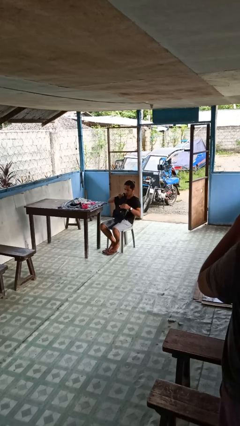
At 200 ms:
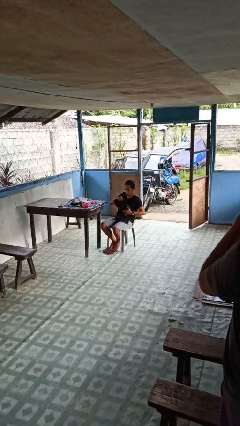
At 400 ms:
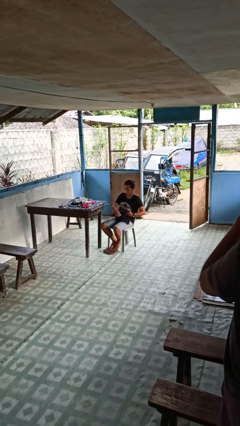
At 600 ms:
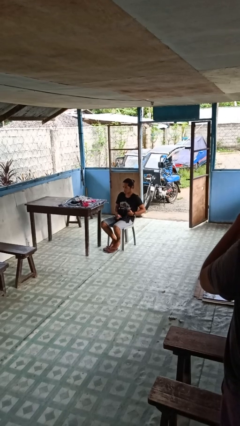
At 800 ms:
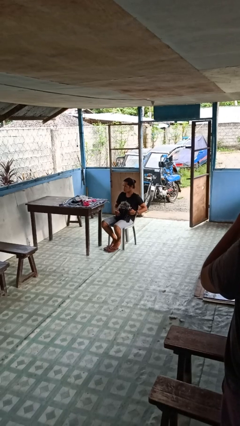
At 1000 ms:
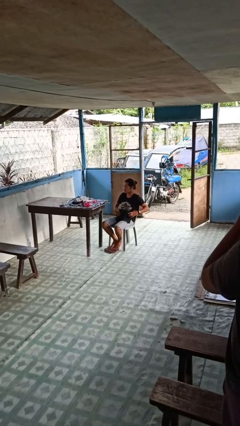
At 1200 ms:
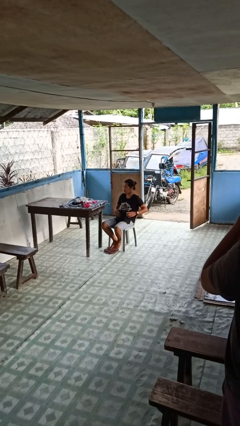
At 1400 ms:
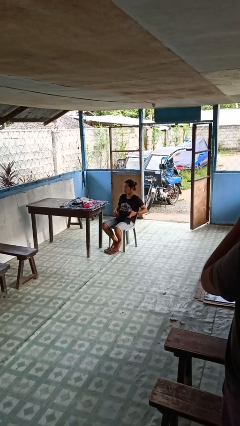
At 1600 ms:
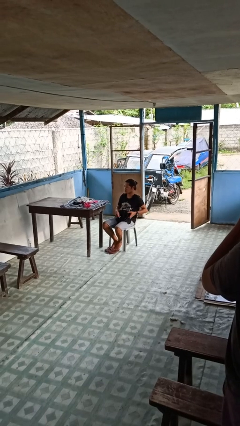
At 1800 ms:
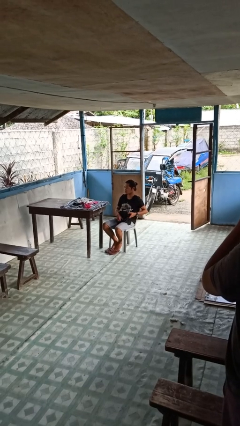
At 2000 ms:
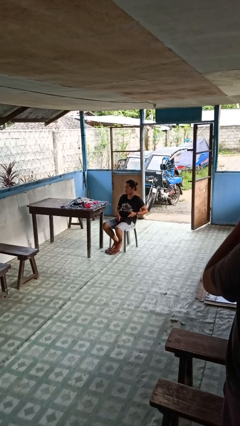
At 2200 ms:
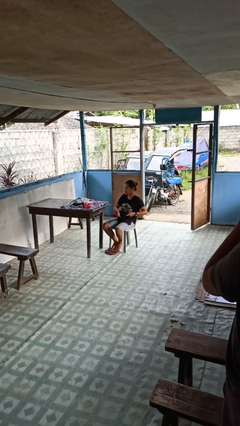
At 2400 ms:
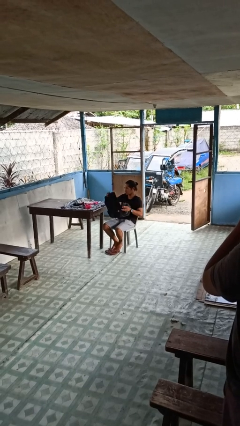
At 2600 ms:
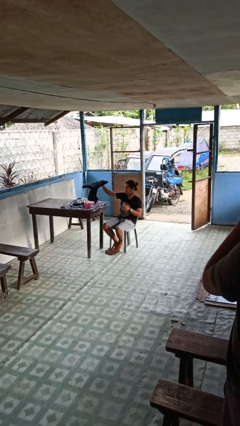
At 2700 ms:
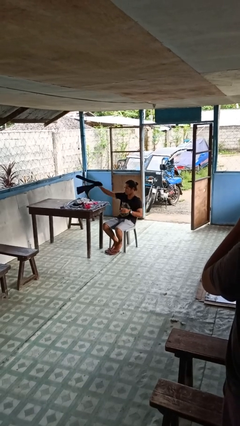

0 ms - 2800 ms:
person folds pants

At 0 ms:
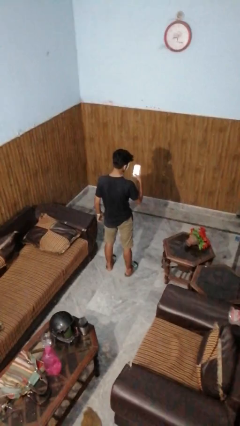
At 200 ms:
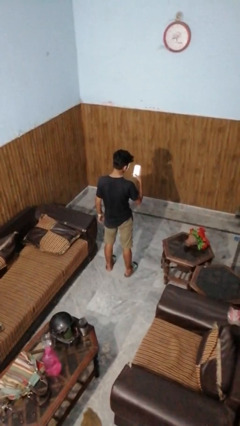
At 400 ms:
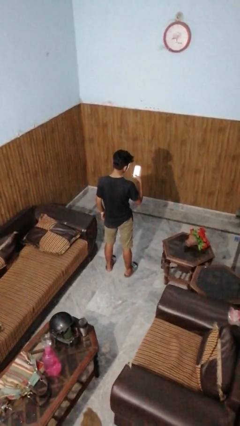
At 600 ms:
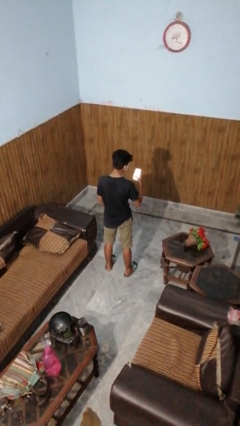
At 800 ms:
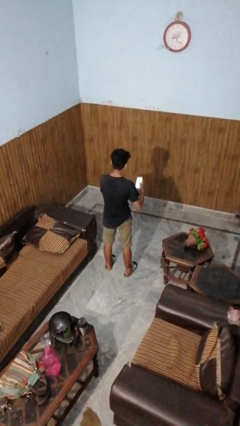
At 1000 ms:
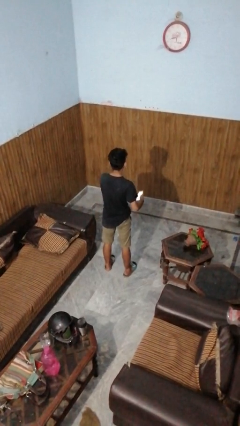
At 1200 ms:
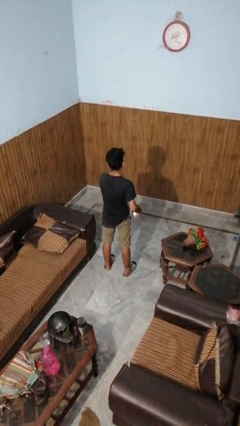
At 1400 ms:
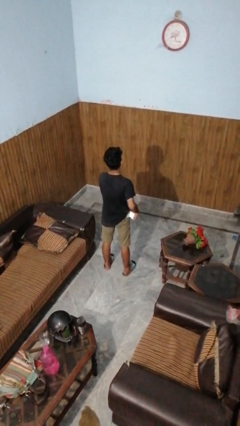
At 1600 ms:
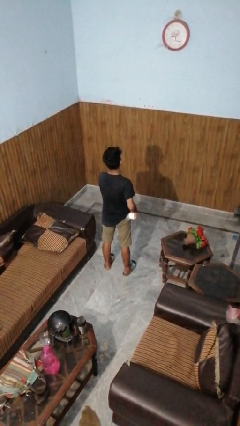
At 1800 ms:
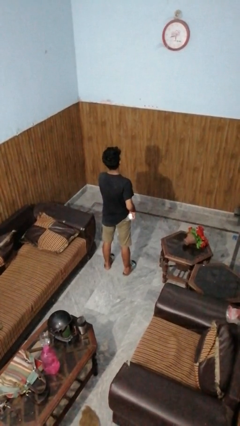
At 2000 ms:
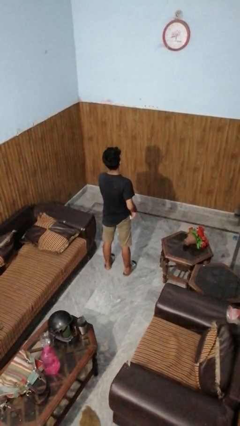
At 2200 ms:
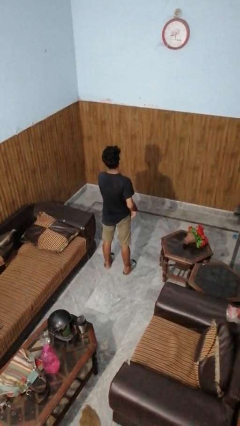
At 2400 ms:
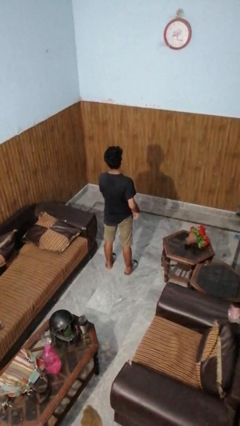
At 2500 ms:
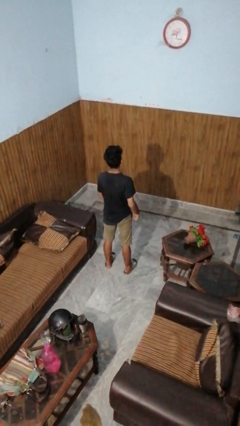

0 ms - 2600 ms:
person puts phone into pocket

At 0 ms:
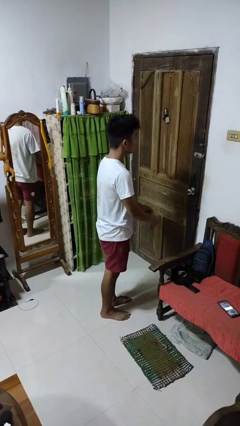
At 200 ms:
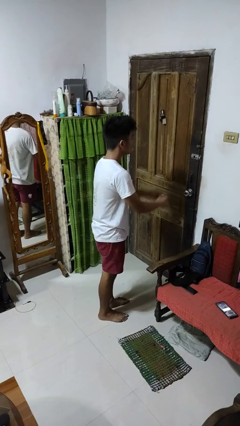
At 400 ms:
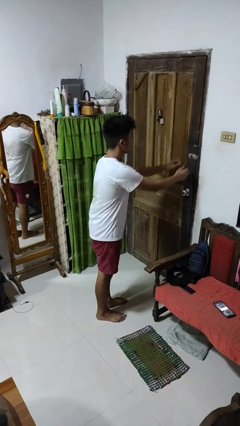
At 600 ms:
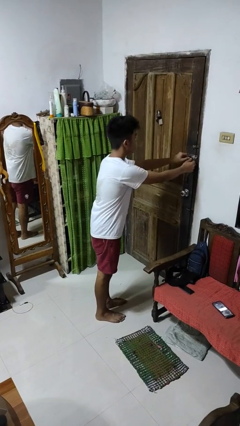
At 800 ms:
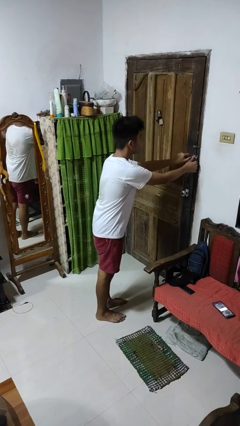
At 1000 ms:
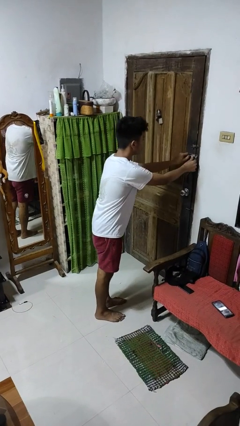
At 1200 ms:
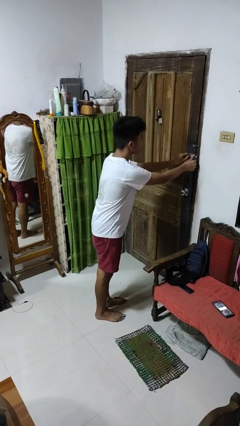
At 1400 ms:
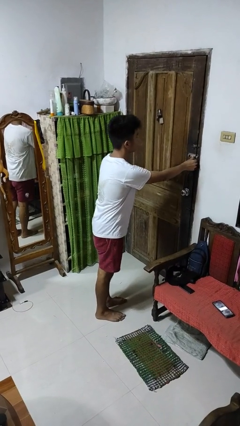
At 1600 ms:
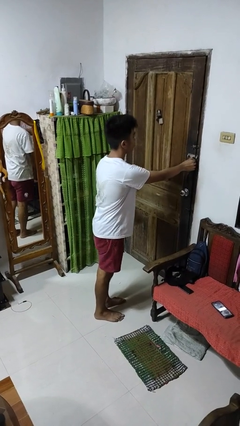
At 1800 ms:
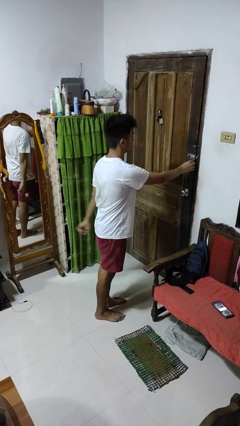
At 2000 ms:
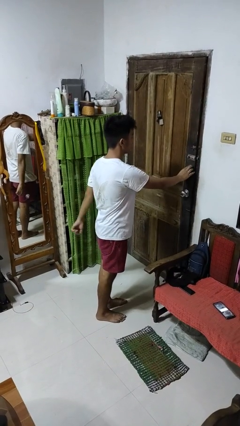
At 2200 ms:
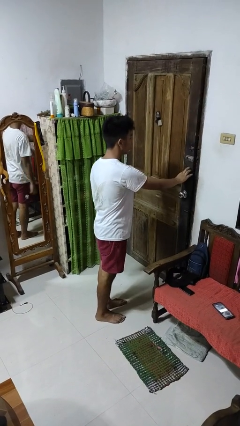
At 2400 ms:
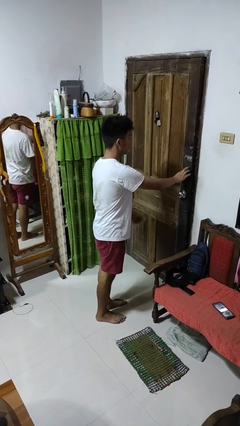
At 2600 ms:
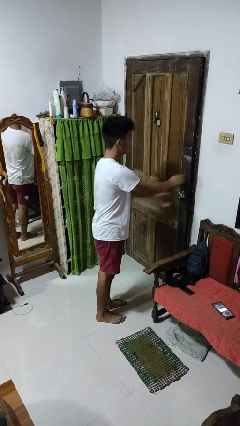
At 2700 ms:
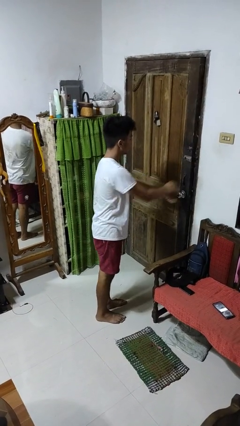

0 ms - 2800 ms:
person unlocks door with keys

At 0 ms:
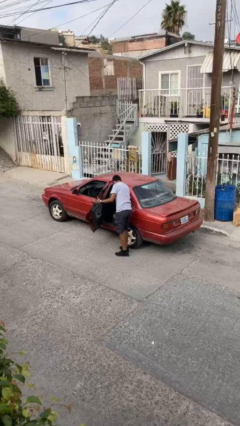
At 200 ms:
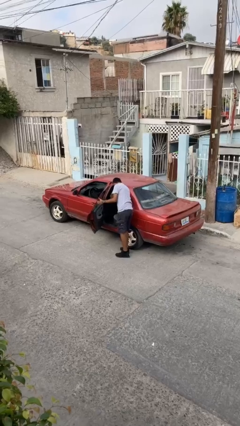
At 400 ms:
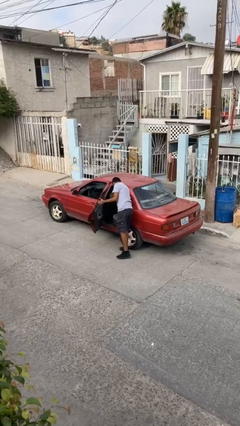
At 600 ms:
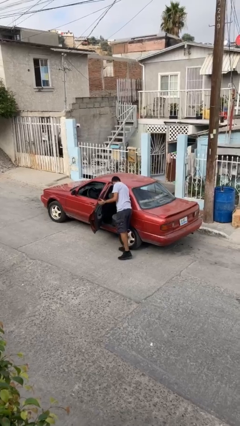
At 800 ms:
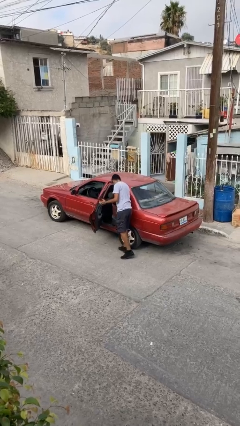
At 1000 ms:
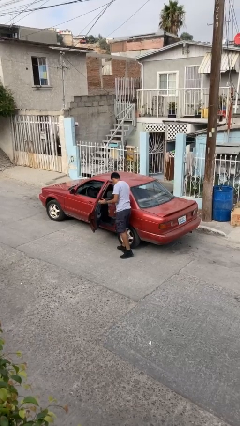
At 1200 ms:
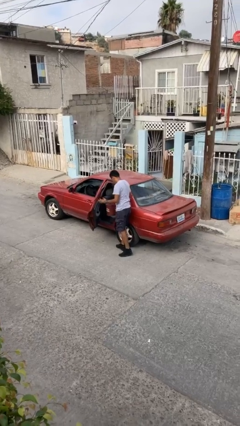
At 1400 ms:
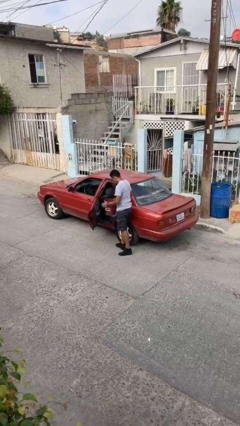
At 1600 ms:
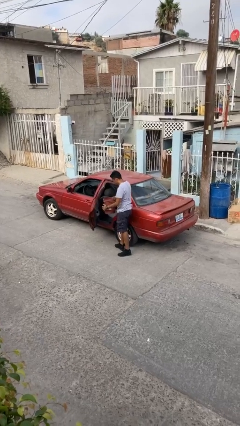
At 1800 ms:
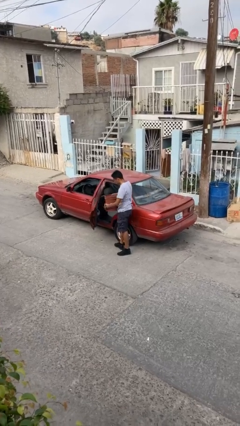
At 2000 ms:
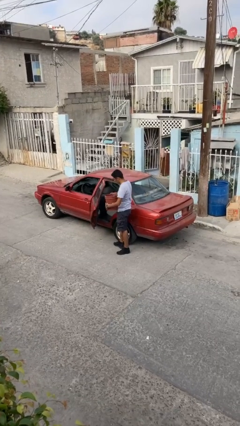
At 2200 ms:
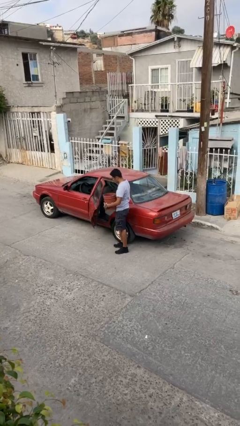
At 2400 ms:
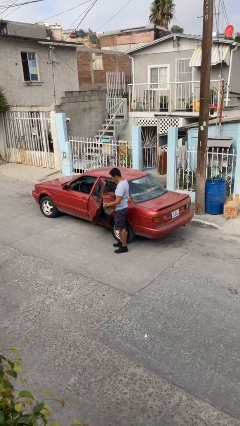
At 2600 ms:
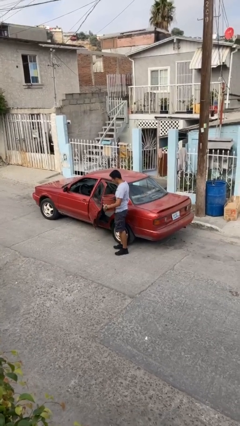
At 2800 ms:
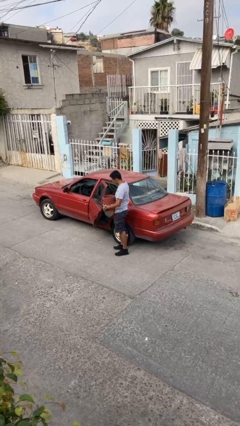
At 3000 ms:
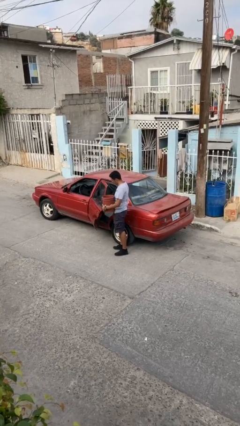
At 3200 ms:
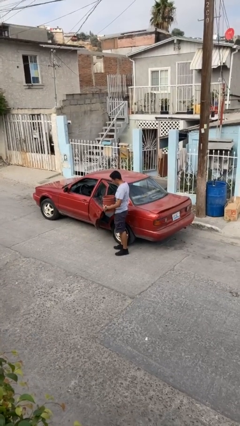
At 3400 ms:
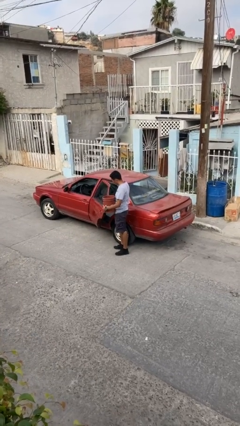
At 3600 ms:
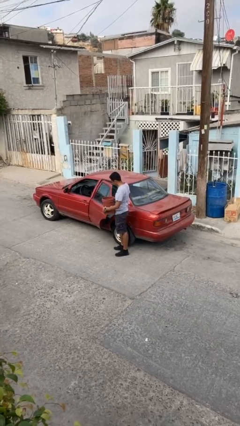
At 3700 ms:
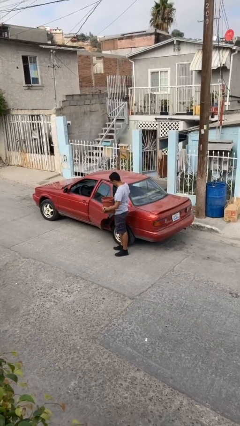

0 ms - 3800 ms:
person unloads car

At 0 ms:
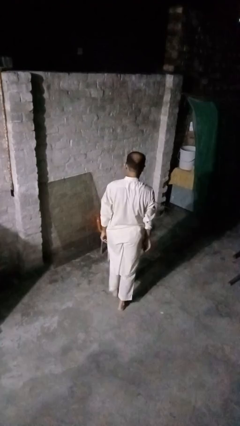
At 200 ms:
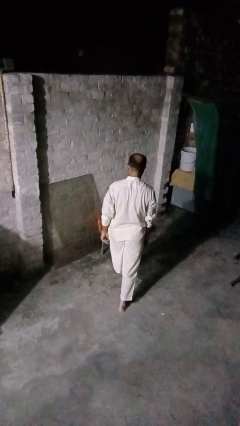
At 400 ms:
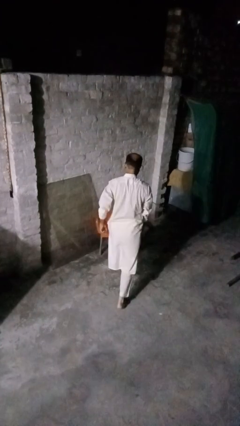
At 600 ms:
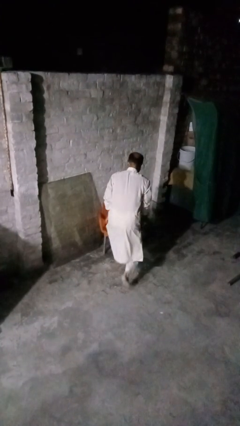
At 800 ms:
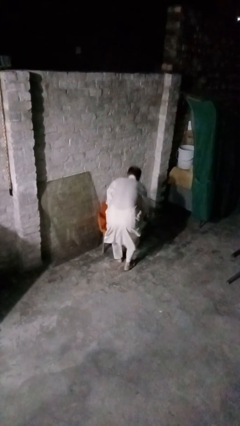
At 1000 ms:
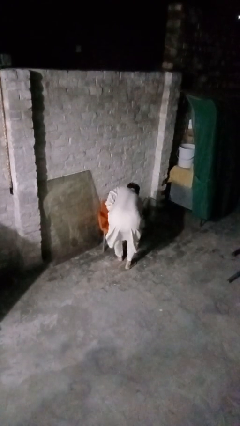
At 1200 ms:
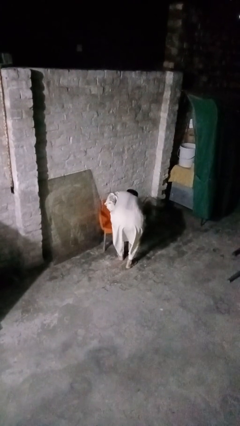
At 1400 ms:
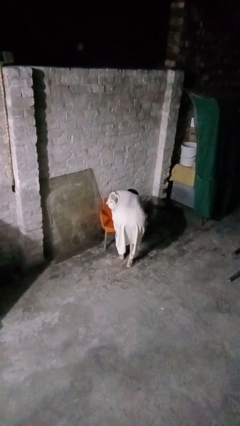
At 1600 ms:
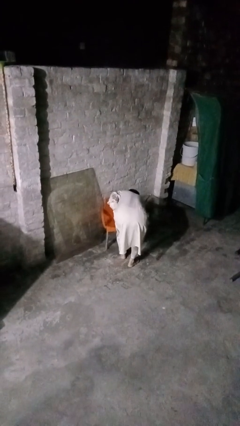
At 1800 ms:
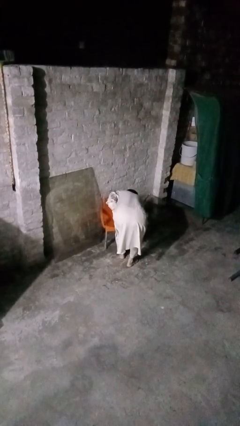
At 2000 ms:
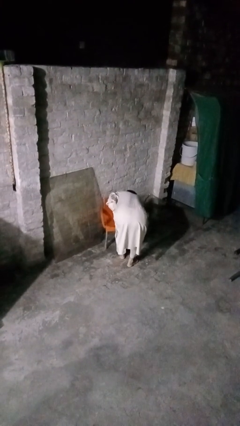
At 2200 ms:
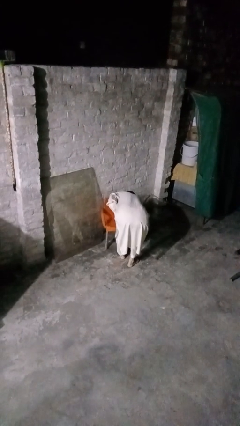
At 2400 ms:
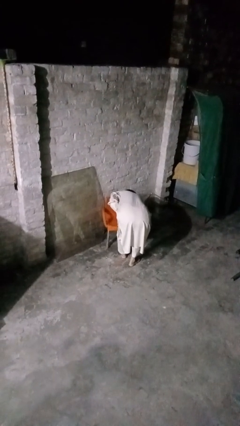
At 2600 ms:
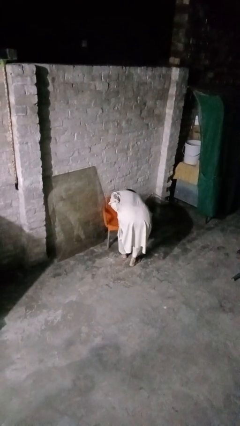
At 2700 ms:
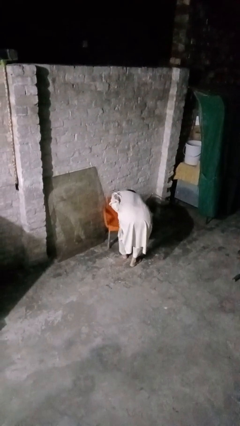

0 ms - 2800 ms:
person stubs toe

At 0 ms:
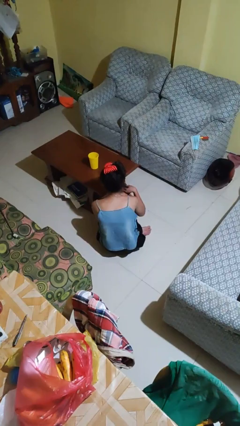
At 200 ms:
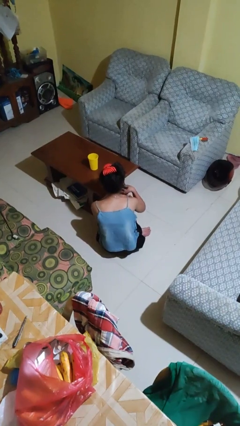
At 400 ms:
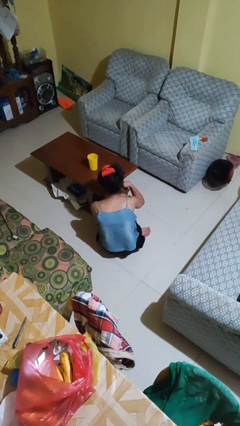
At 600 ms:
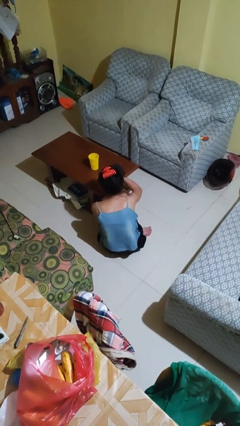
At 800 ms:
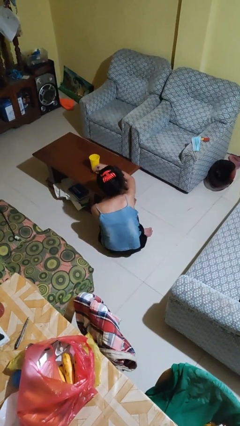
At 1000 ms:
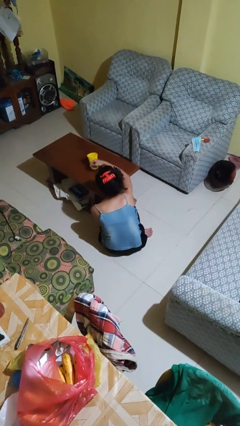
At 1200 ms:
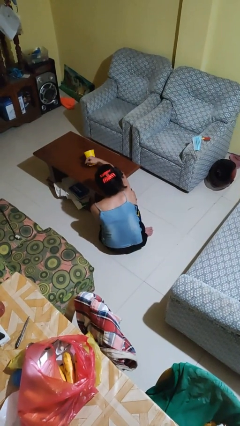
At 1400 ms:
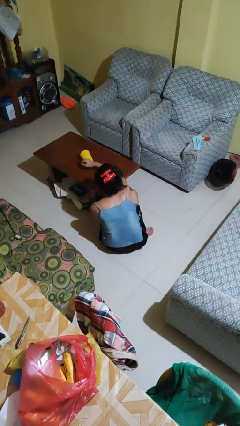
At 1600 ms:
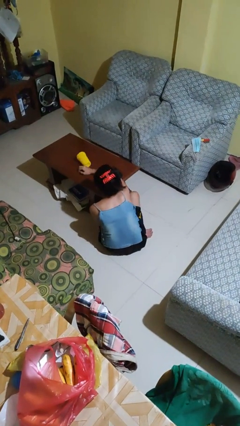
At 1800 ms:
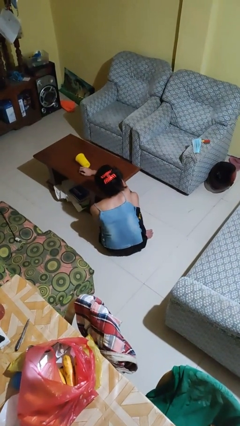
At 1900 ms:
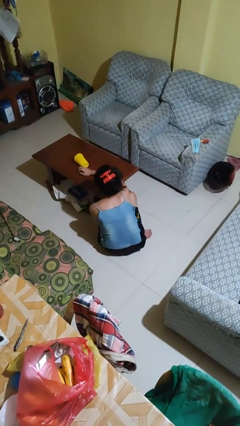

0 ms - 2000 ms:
person knocks over glass

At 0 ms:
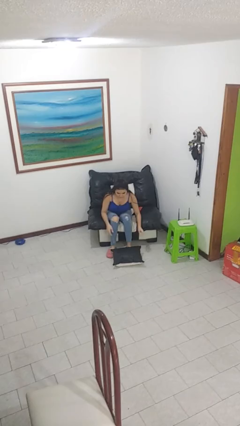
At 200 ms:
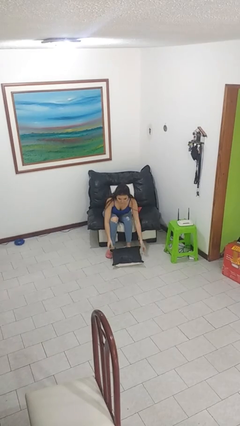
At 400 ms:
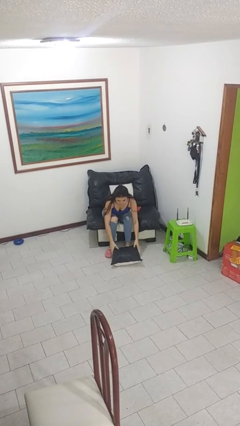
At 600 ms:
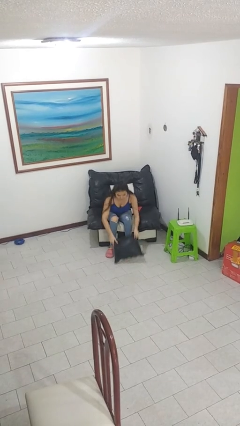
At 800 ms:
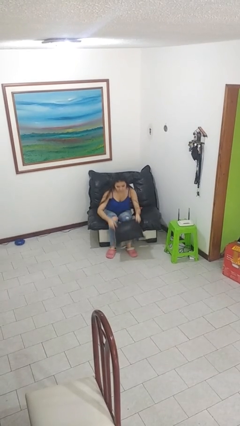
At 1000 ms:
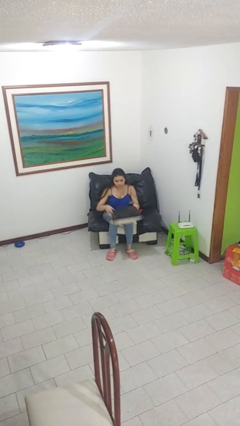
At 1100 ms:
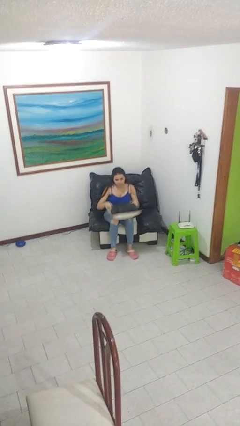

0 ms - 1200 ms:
person picks up object from floor
